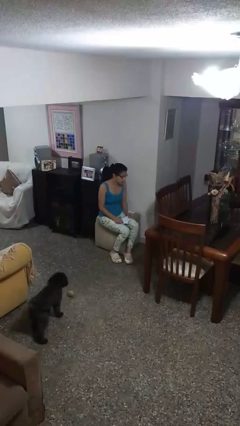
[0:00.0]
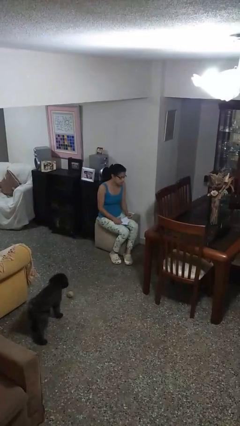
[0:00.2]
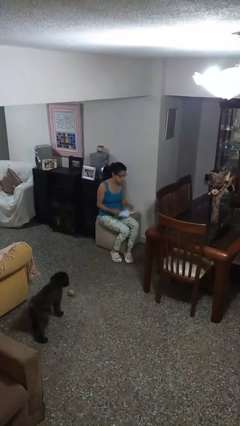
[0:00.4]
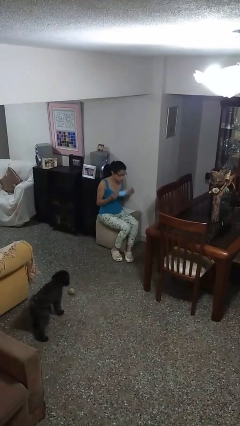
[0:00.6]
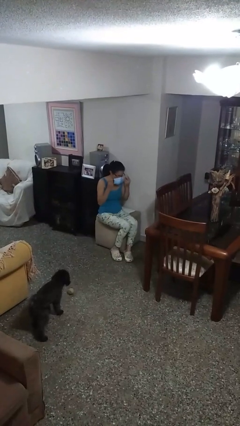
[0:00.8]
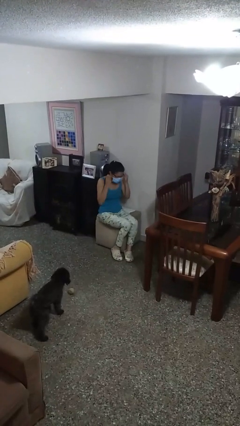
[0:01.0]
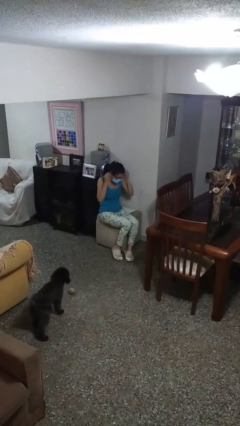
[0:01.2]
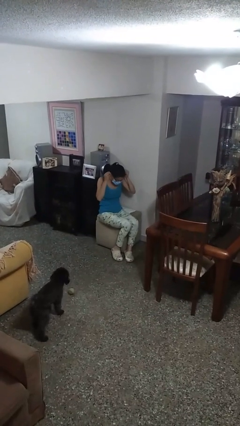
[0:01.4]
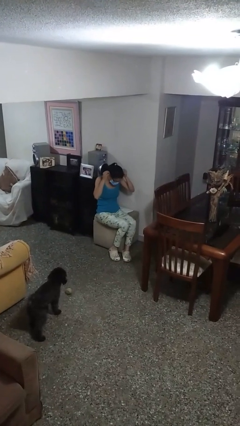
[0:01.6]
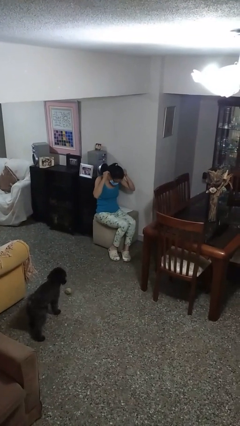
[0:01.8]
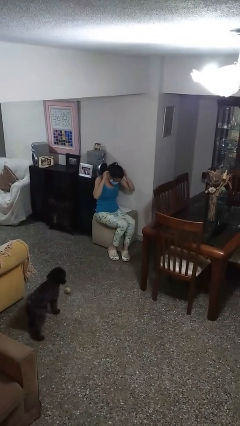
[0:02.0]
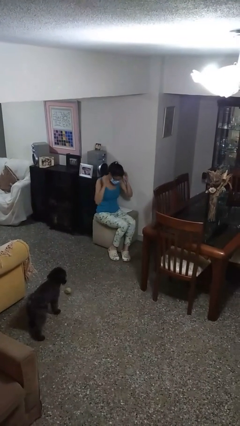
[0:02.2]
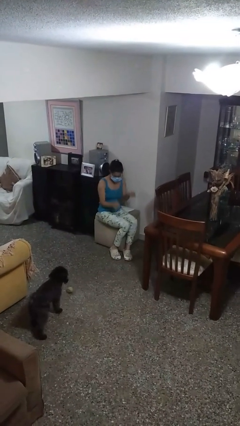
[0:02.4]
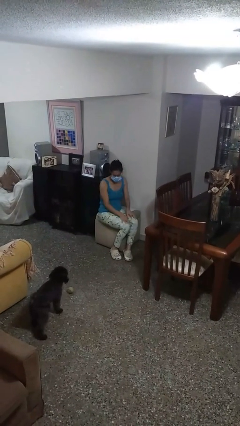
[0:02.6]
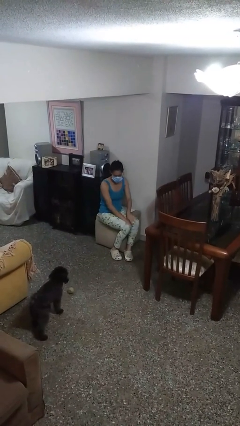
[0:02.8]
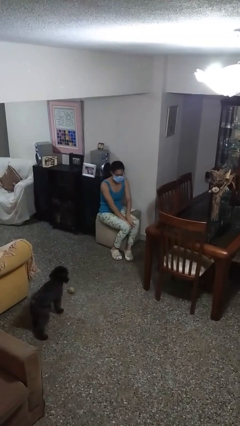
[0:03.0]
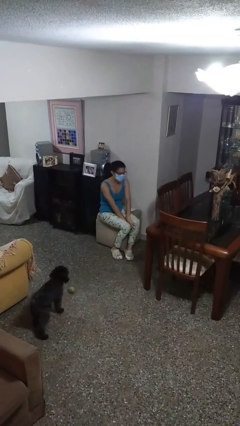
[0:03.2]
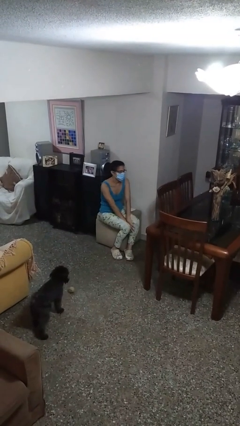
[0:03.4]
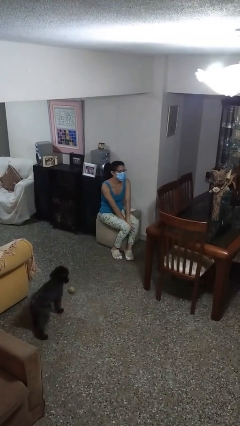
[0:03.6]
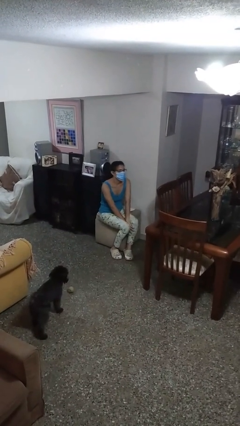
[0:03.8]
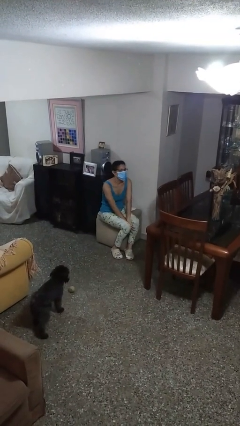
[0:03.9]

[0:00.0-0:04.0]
person puts on facemask

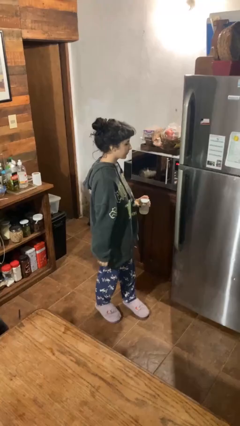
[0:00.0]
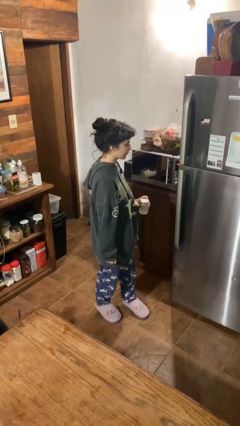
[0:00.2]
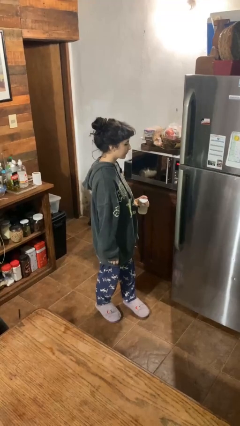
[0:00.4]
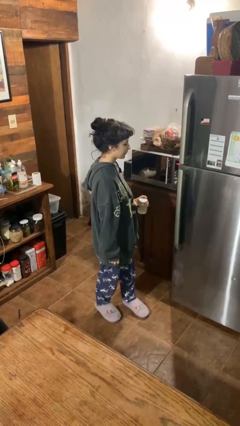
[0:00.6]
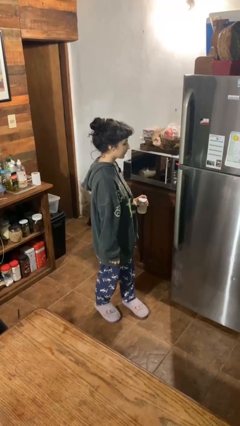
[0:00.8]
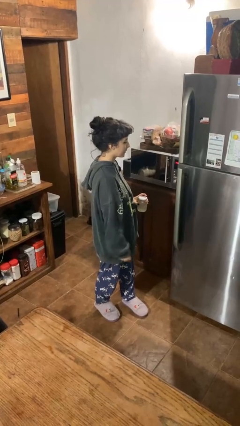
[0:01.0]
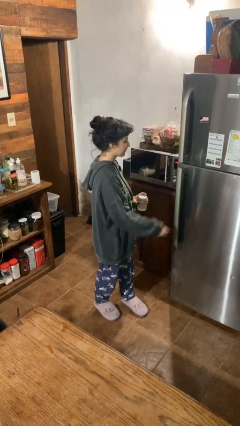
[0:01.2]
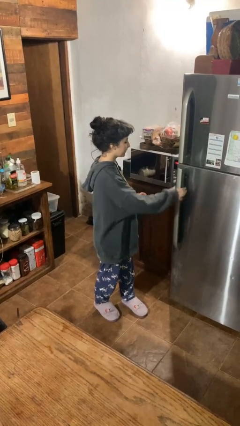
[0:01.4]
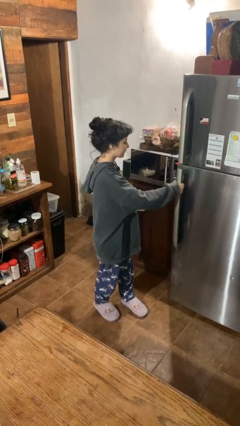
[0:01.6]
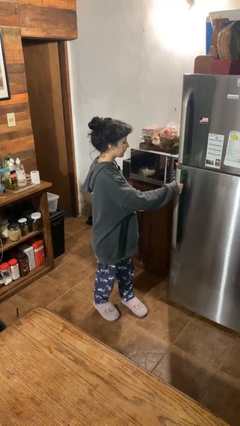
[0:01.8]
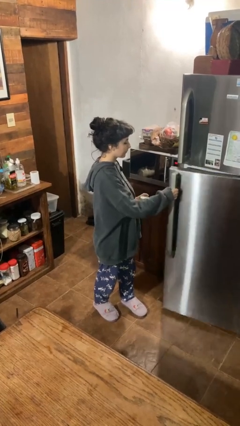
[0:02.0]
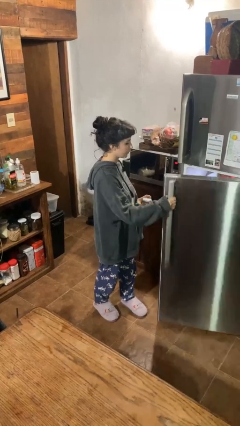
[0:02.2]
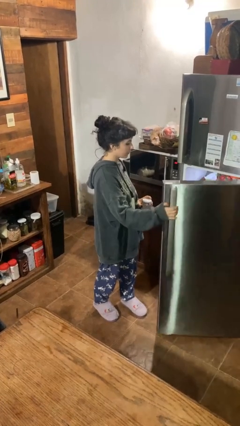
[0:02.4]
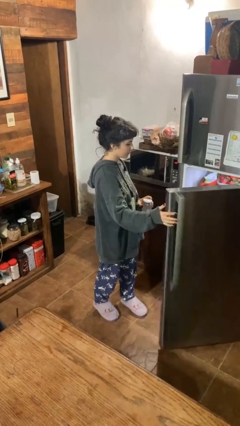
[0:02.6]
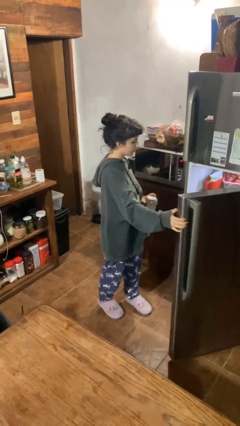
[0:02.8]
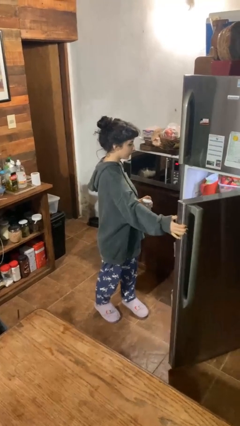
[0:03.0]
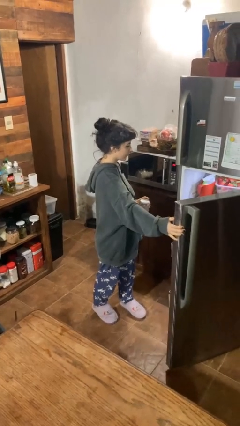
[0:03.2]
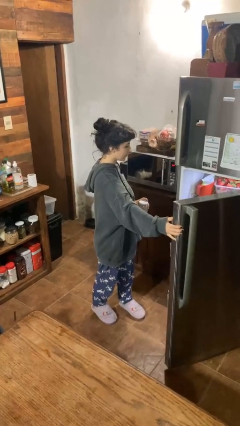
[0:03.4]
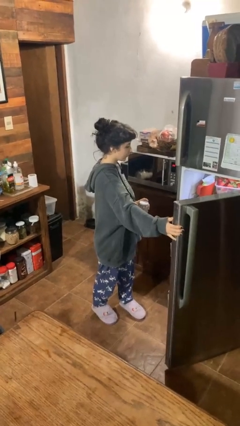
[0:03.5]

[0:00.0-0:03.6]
person opens refrigerator

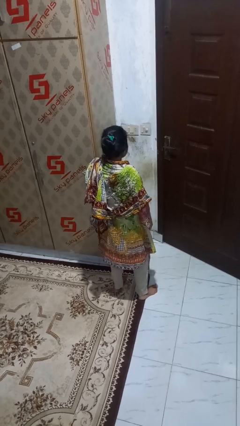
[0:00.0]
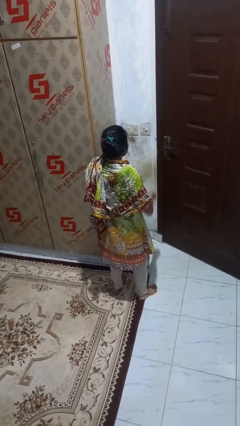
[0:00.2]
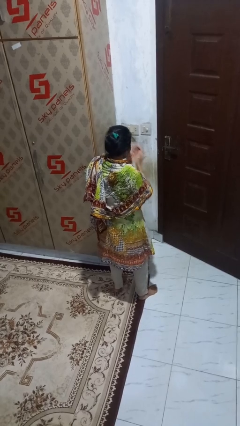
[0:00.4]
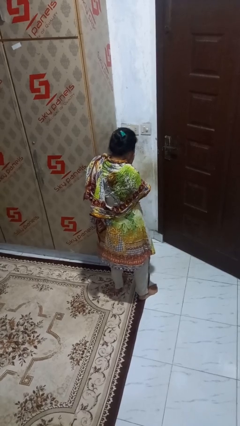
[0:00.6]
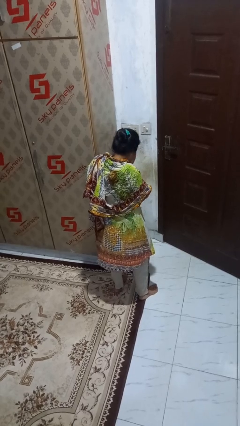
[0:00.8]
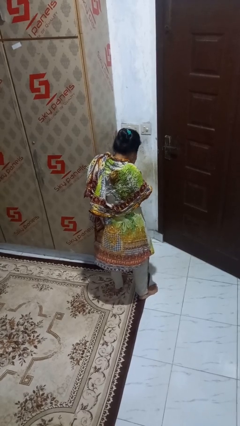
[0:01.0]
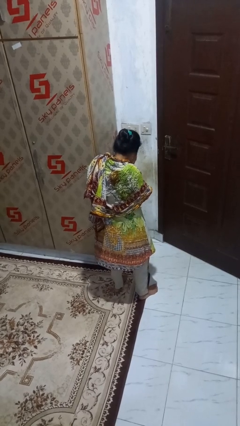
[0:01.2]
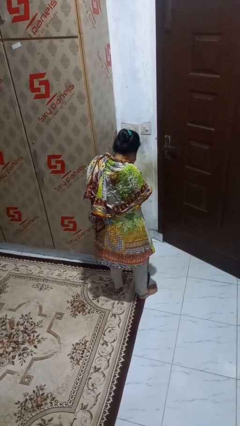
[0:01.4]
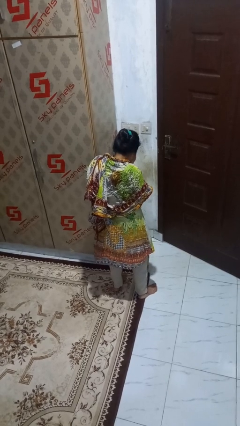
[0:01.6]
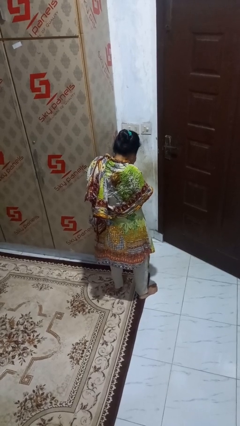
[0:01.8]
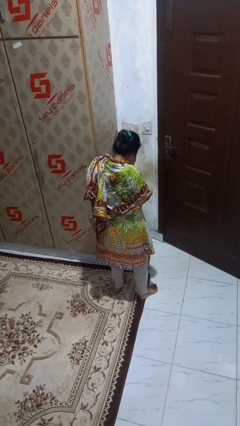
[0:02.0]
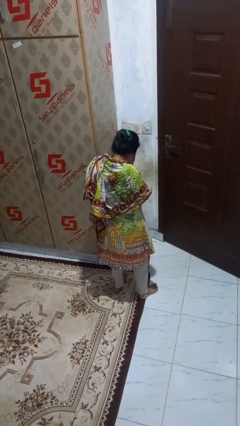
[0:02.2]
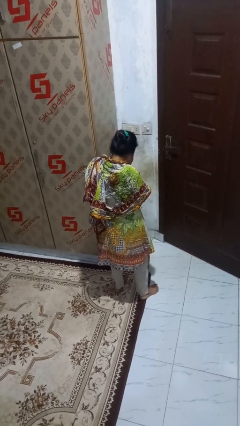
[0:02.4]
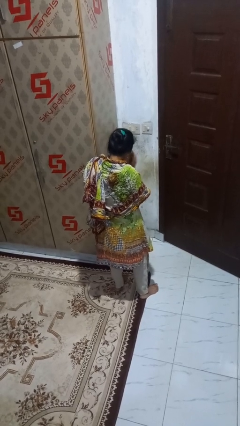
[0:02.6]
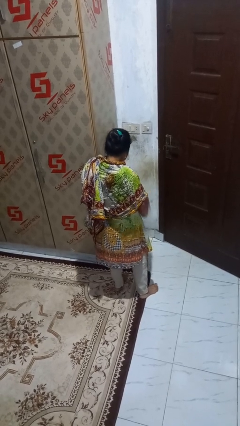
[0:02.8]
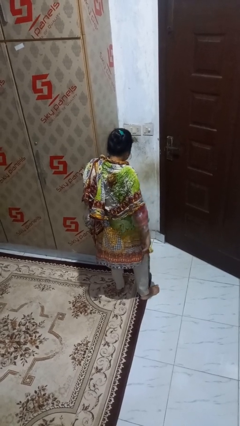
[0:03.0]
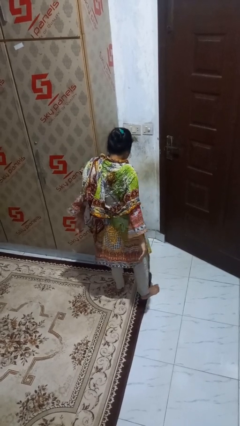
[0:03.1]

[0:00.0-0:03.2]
person sneezes into hand

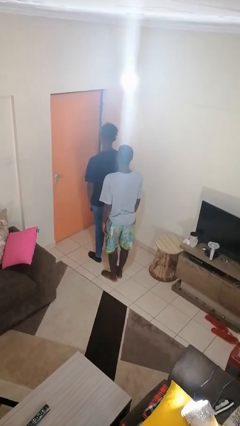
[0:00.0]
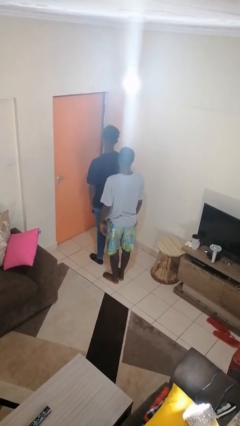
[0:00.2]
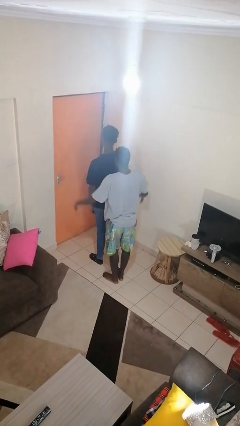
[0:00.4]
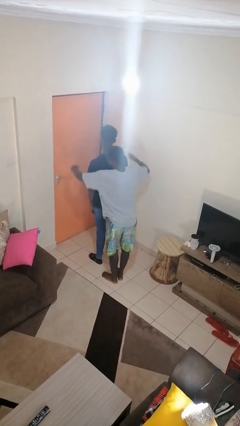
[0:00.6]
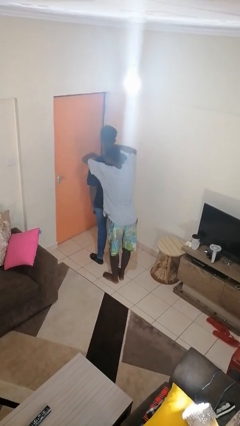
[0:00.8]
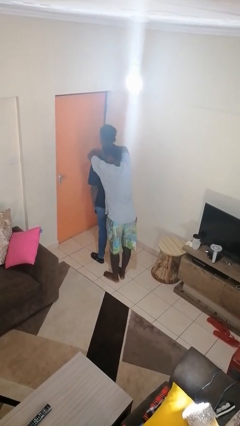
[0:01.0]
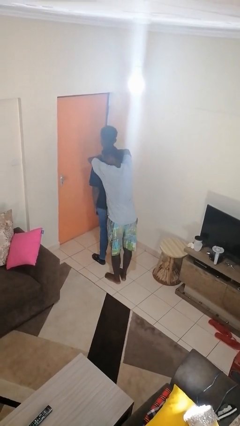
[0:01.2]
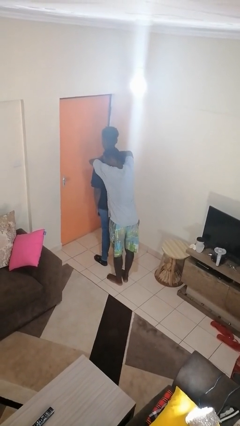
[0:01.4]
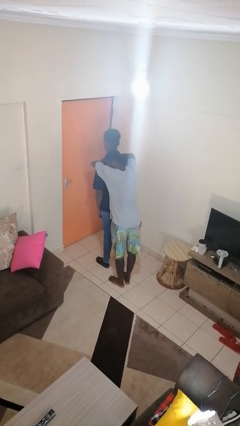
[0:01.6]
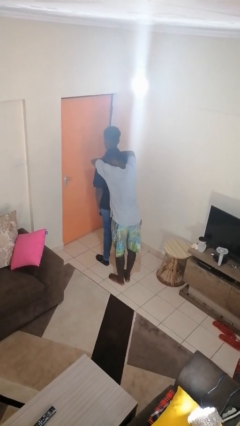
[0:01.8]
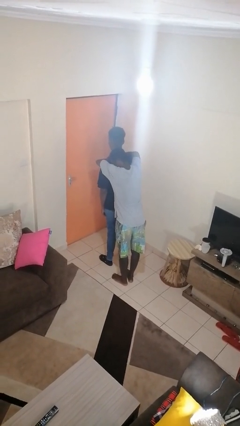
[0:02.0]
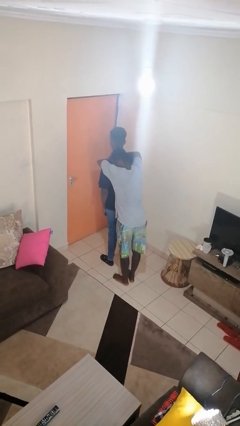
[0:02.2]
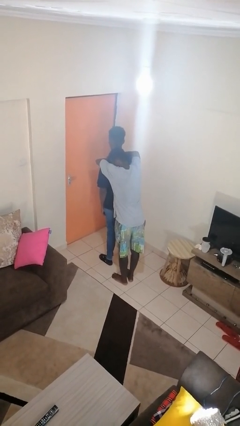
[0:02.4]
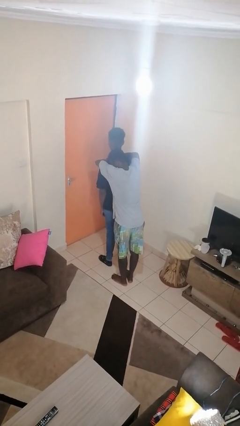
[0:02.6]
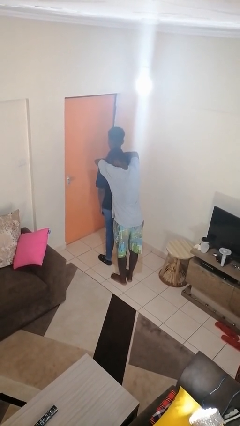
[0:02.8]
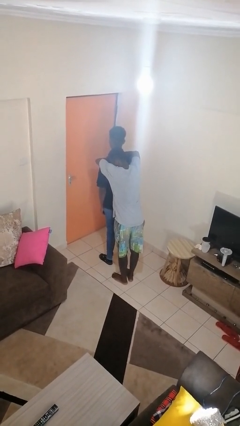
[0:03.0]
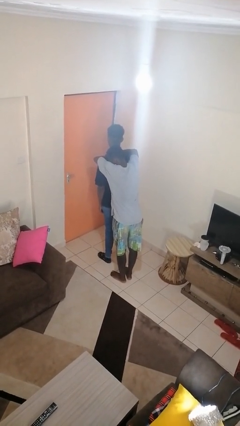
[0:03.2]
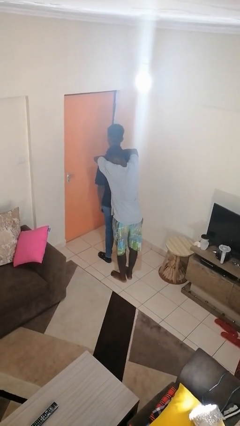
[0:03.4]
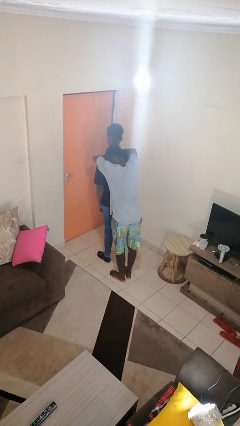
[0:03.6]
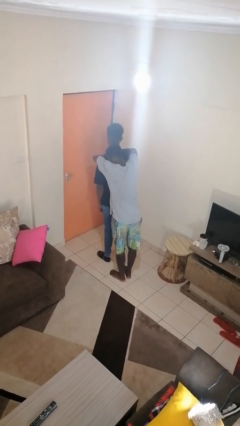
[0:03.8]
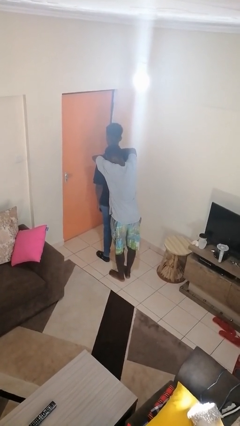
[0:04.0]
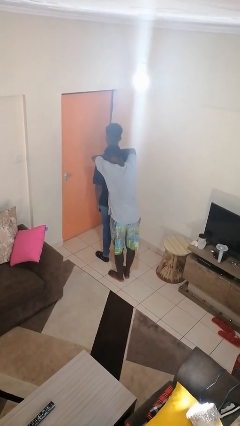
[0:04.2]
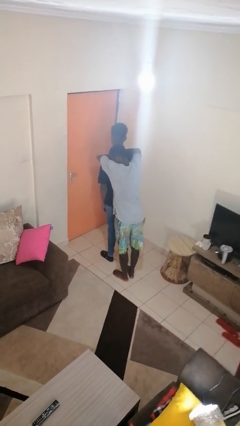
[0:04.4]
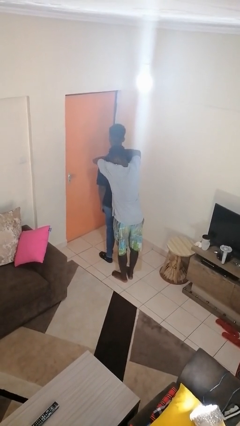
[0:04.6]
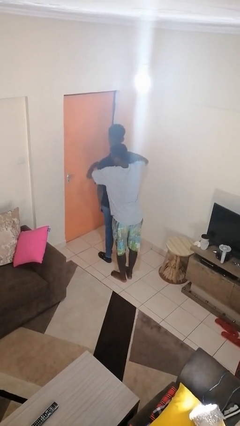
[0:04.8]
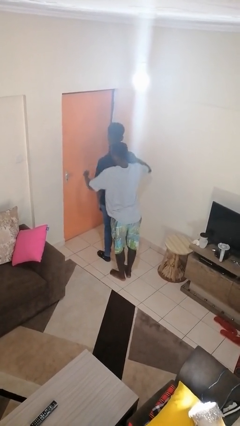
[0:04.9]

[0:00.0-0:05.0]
person hugs person from behind

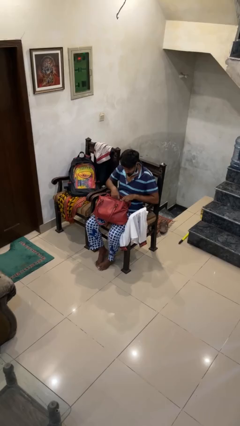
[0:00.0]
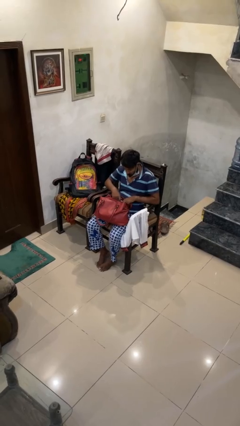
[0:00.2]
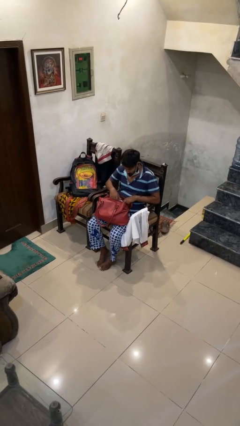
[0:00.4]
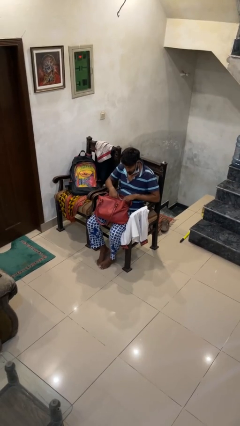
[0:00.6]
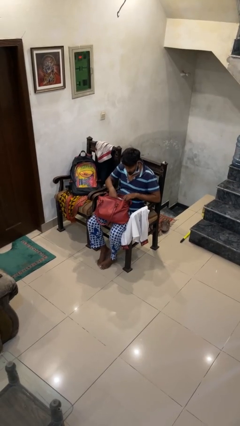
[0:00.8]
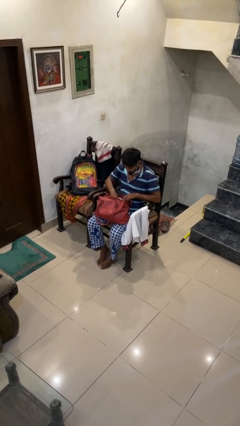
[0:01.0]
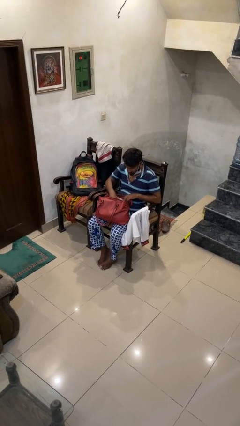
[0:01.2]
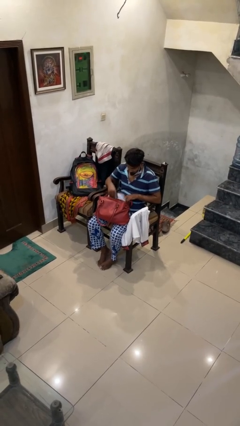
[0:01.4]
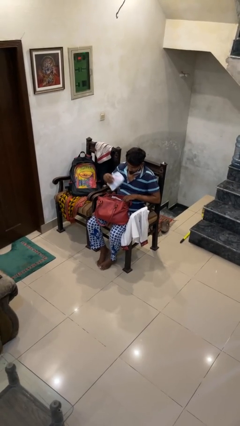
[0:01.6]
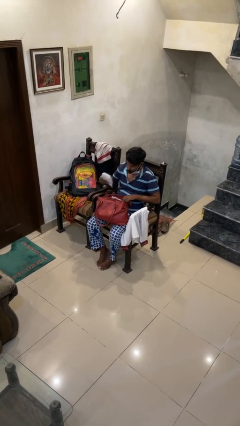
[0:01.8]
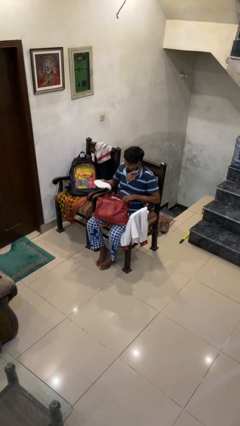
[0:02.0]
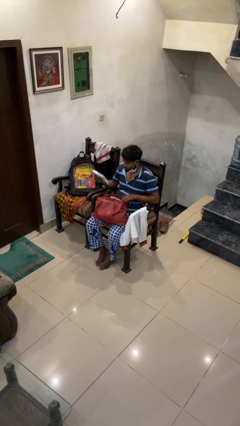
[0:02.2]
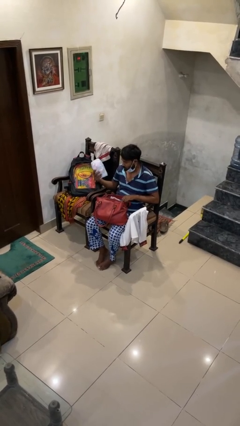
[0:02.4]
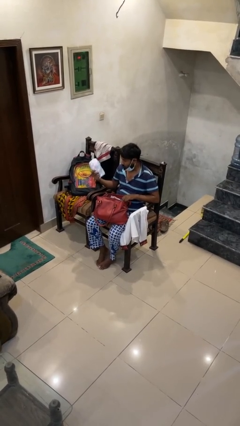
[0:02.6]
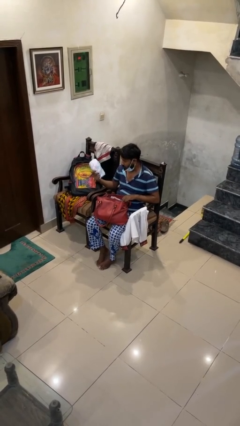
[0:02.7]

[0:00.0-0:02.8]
person takes object from purse
